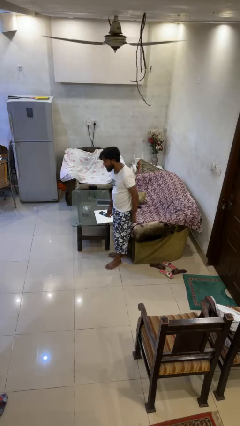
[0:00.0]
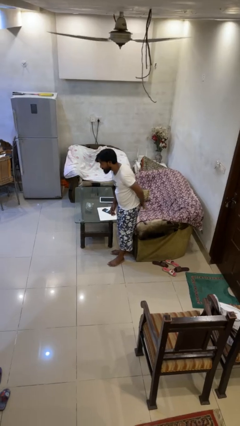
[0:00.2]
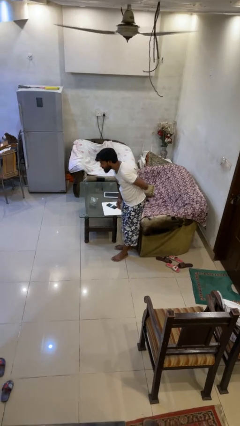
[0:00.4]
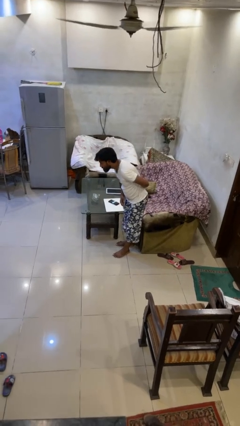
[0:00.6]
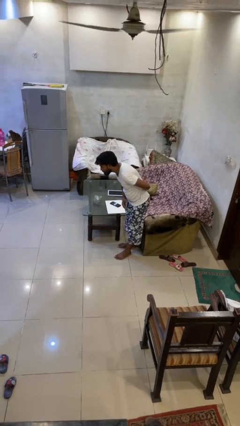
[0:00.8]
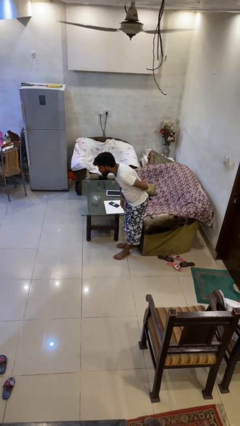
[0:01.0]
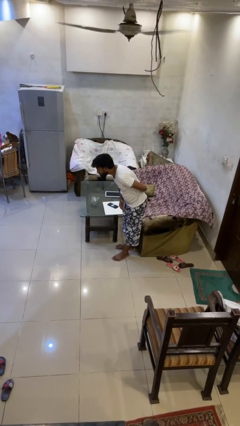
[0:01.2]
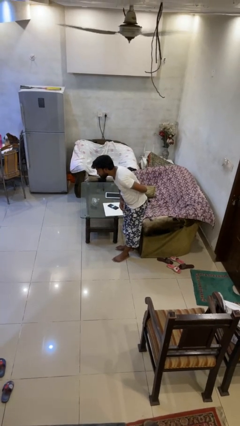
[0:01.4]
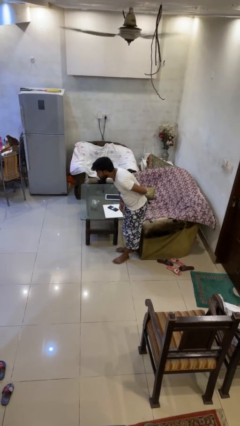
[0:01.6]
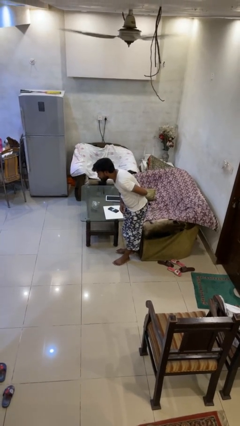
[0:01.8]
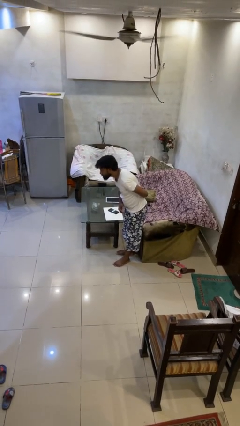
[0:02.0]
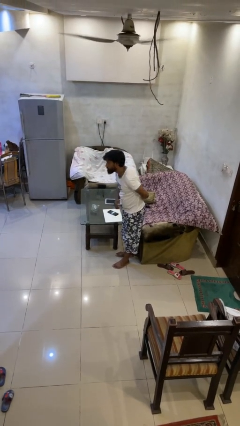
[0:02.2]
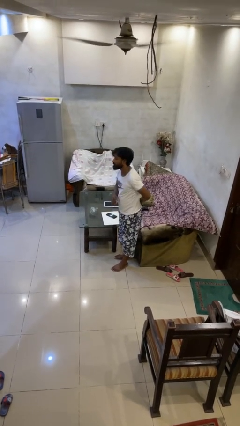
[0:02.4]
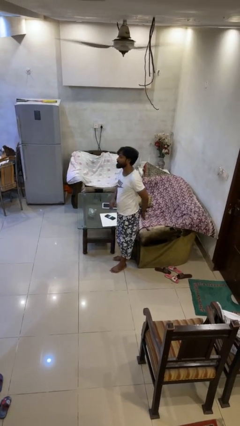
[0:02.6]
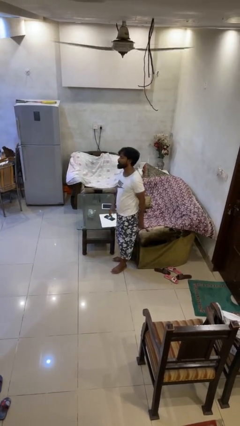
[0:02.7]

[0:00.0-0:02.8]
person bows

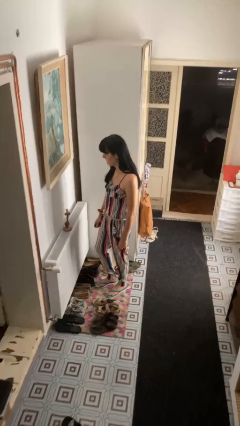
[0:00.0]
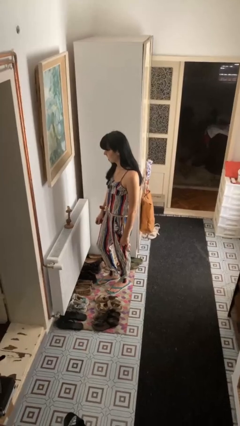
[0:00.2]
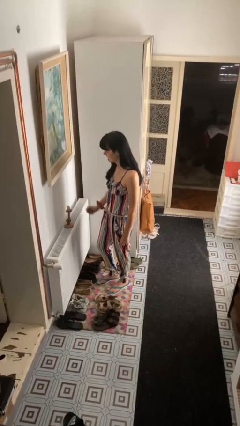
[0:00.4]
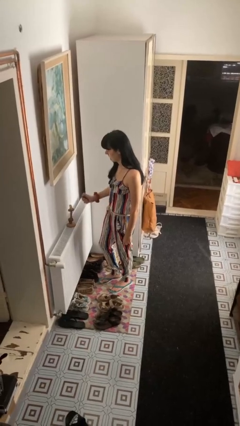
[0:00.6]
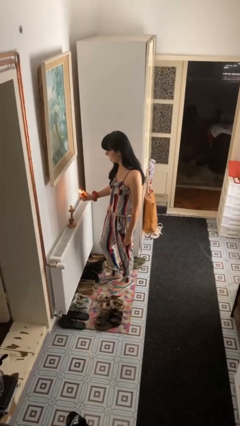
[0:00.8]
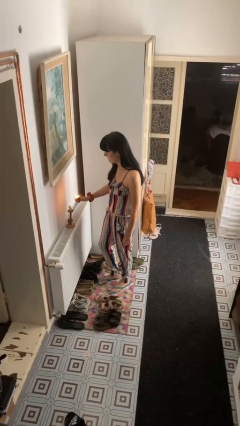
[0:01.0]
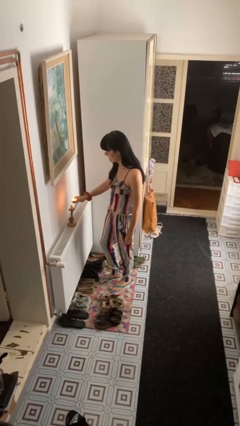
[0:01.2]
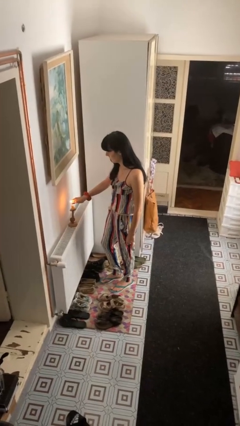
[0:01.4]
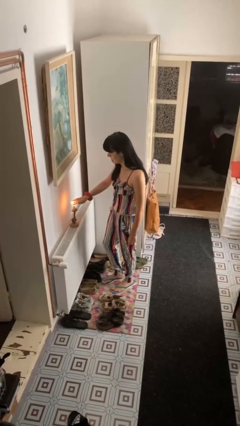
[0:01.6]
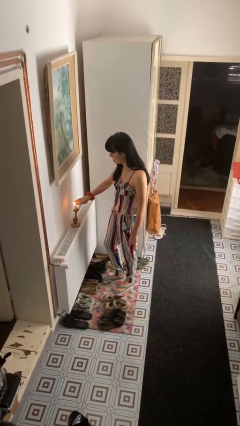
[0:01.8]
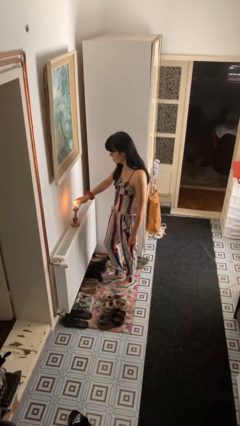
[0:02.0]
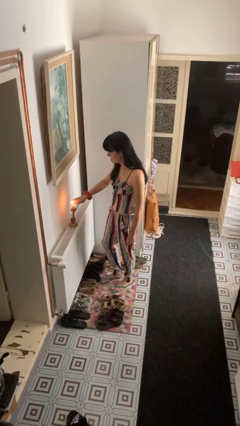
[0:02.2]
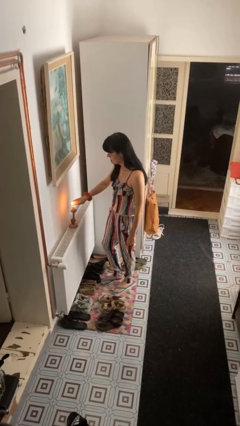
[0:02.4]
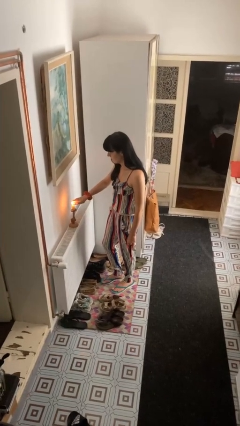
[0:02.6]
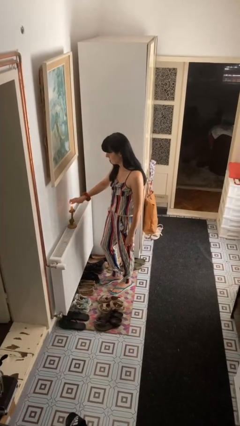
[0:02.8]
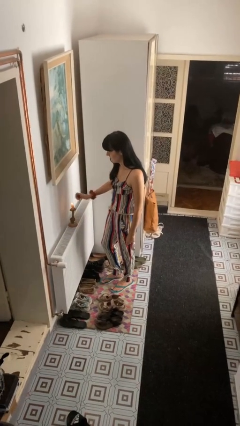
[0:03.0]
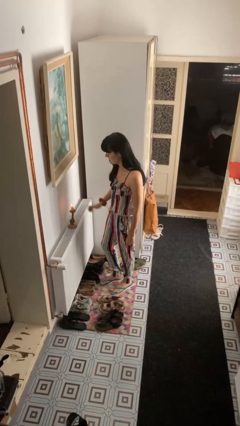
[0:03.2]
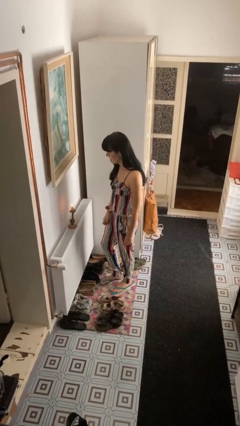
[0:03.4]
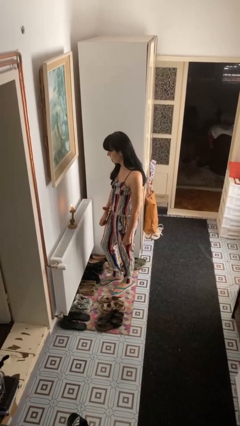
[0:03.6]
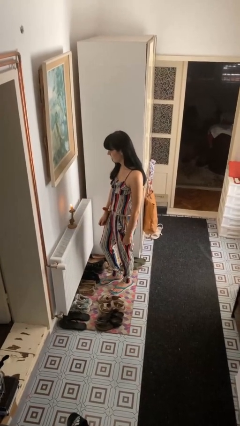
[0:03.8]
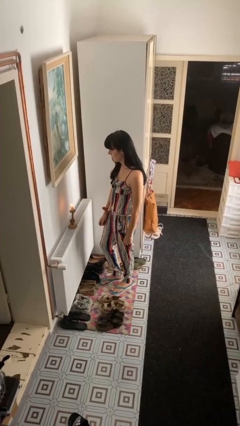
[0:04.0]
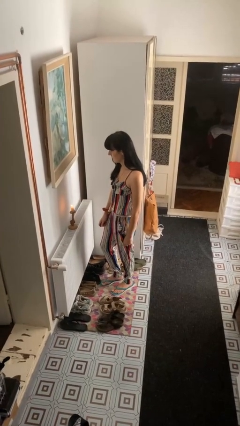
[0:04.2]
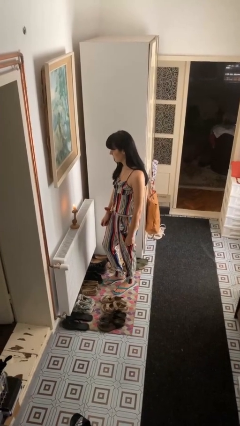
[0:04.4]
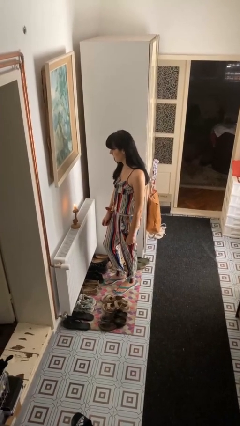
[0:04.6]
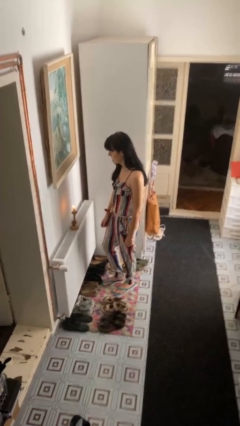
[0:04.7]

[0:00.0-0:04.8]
person lights candle

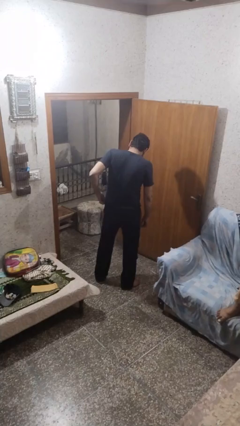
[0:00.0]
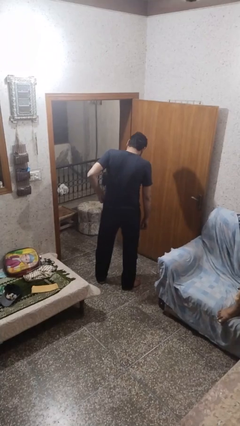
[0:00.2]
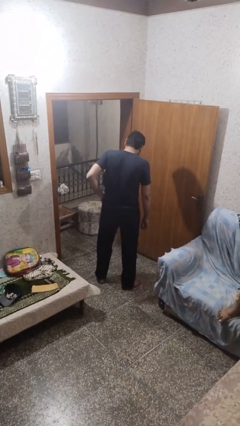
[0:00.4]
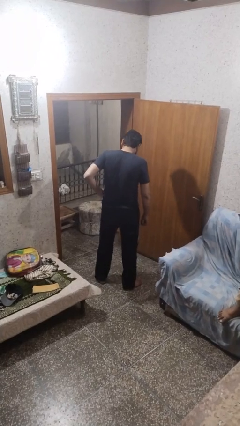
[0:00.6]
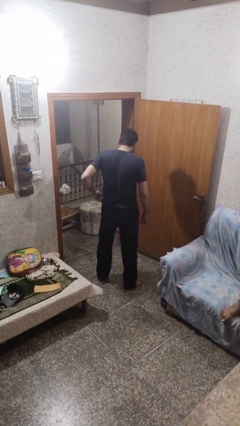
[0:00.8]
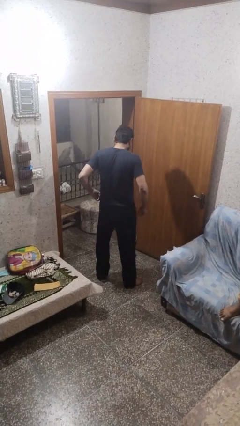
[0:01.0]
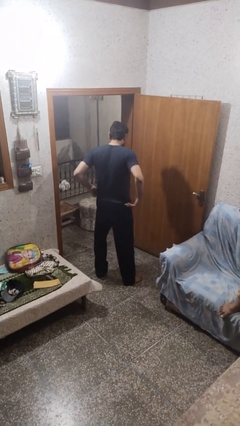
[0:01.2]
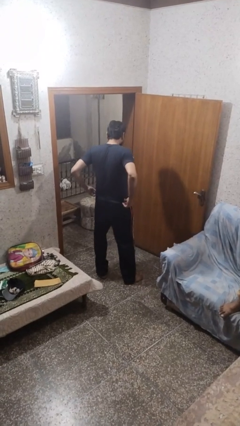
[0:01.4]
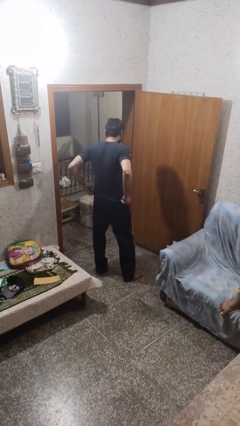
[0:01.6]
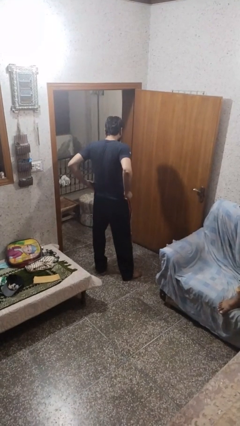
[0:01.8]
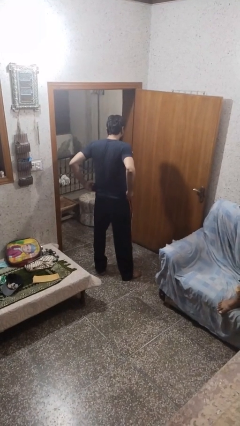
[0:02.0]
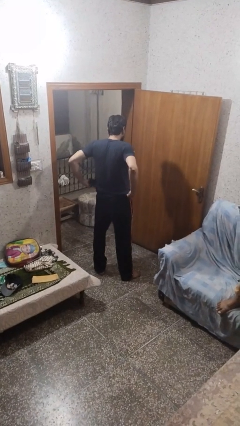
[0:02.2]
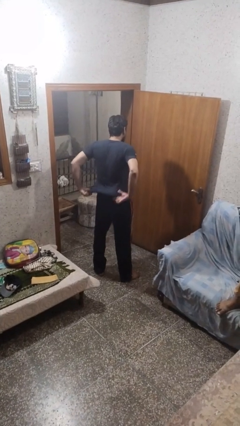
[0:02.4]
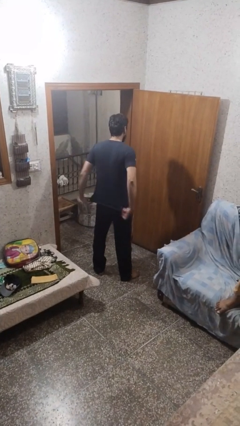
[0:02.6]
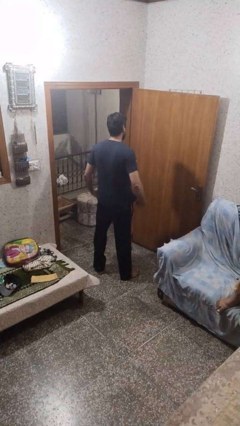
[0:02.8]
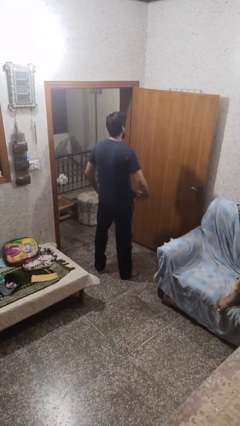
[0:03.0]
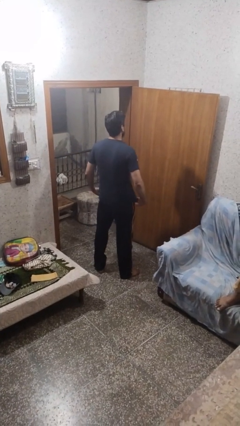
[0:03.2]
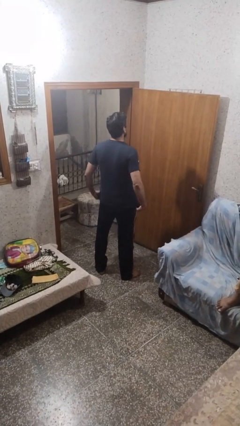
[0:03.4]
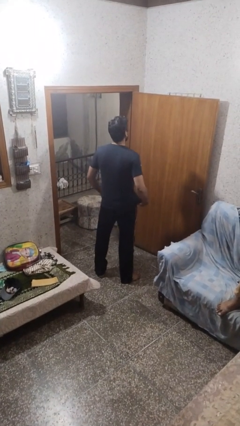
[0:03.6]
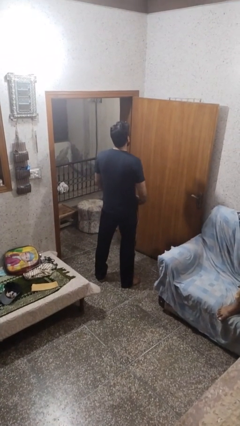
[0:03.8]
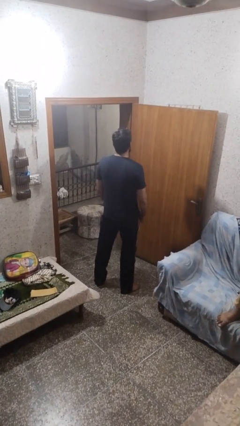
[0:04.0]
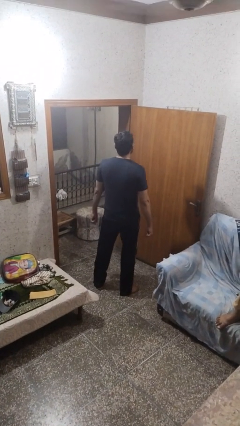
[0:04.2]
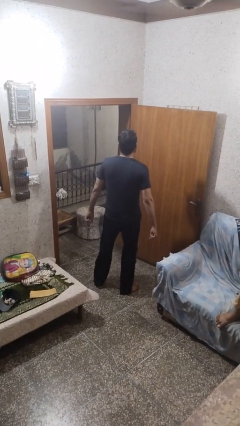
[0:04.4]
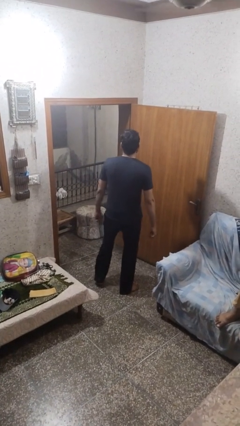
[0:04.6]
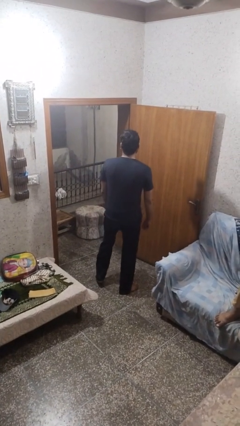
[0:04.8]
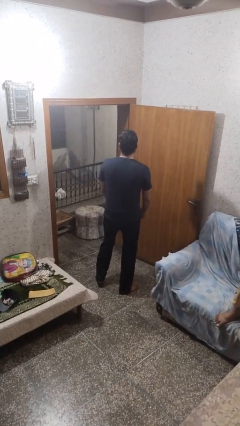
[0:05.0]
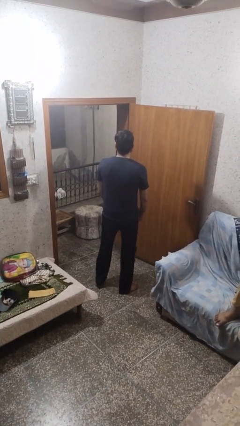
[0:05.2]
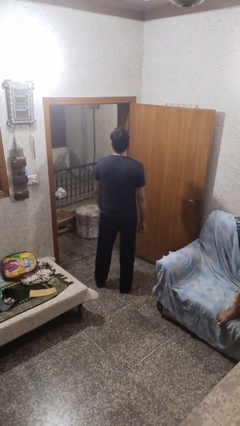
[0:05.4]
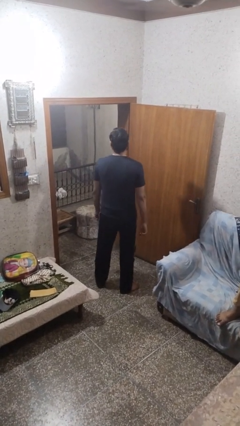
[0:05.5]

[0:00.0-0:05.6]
person untucks shirt

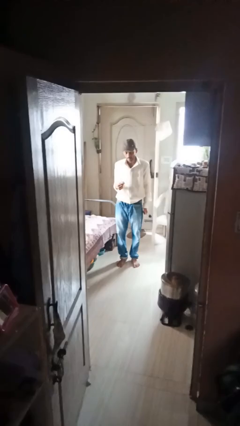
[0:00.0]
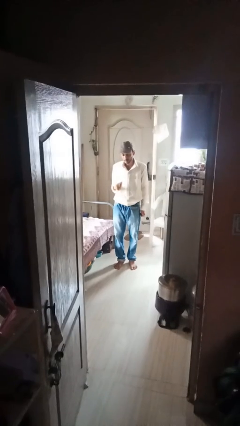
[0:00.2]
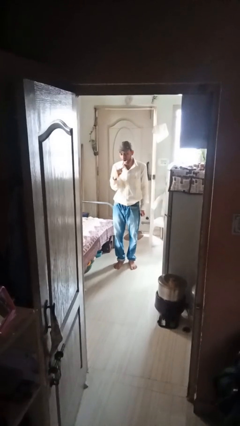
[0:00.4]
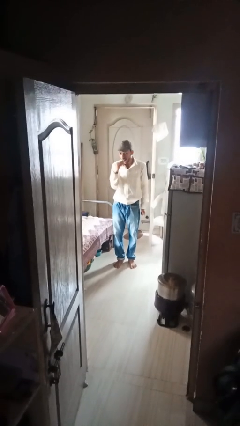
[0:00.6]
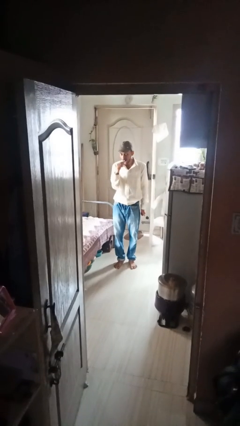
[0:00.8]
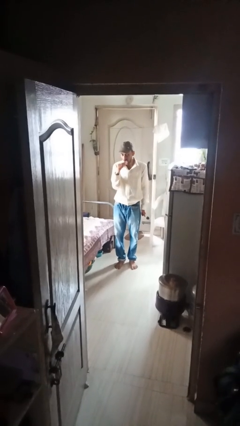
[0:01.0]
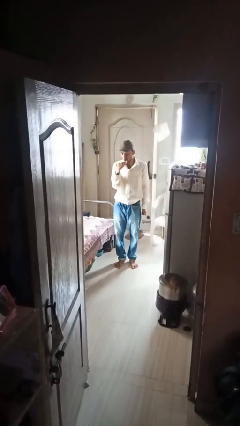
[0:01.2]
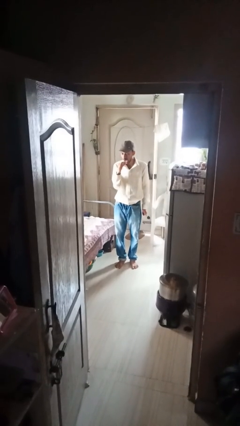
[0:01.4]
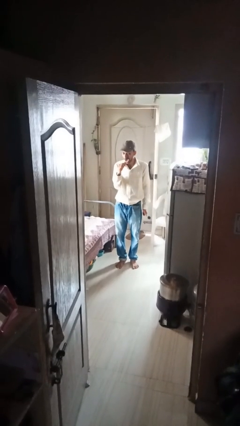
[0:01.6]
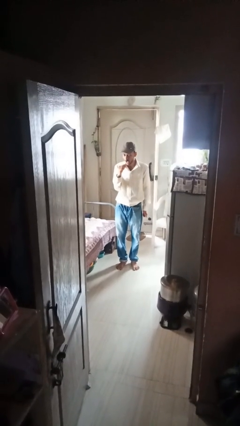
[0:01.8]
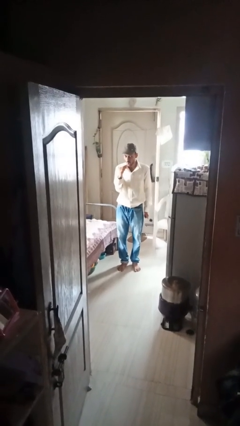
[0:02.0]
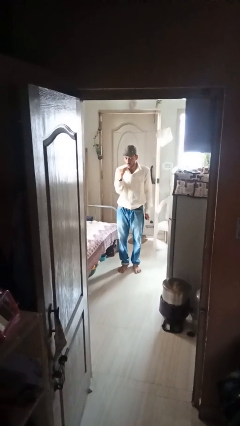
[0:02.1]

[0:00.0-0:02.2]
person brushes teeth

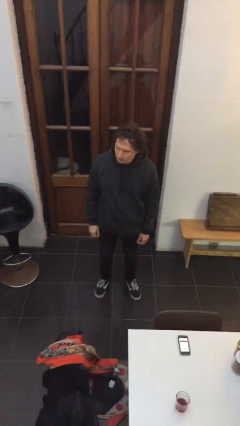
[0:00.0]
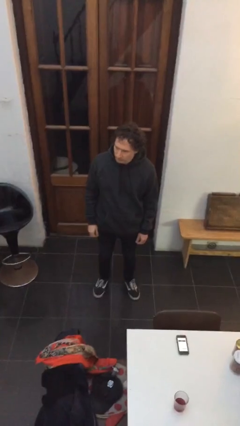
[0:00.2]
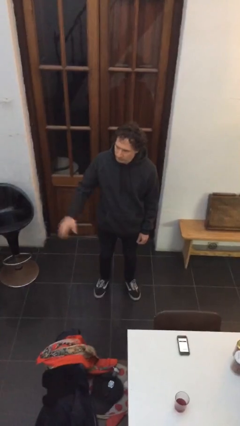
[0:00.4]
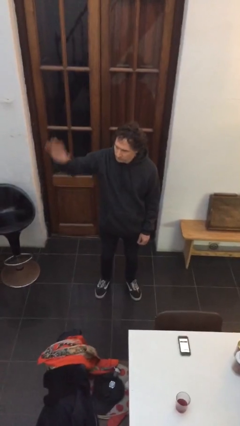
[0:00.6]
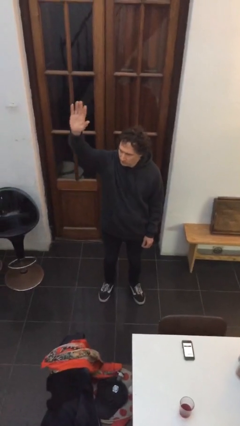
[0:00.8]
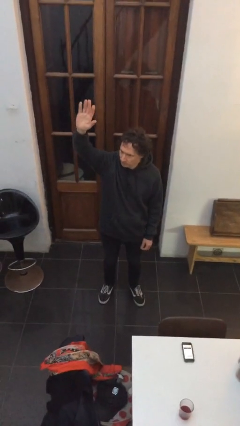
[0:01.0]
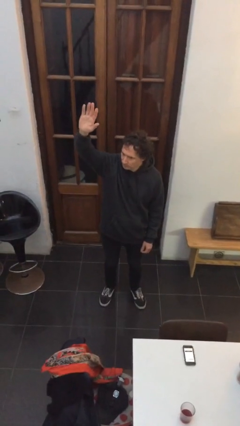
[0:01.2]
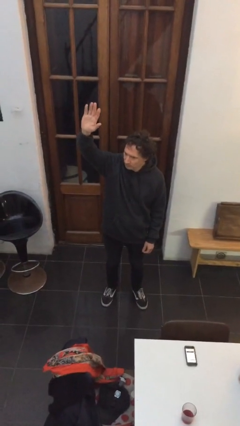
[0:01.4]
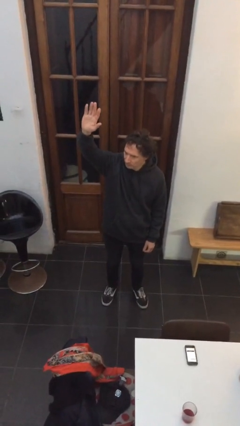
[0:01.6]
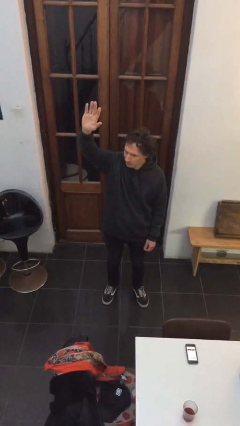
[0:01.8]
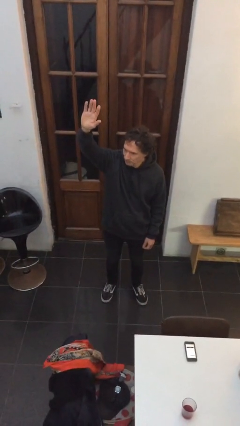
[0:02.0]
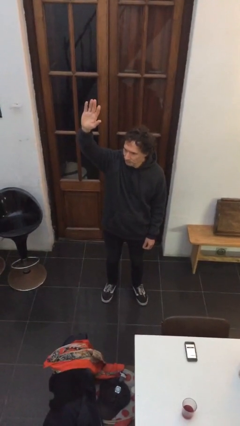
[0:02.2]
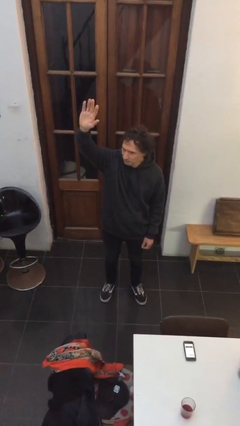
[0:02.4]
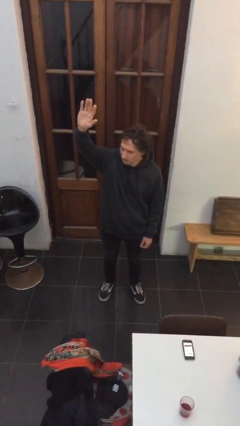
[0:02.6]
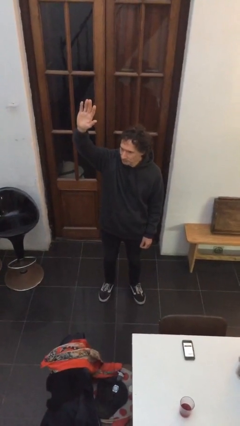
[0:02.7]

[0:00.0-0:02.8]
person gestures raise hand
